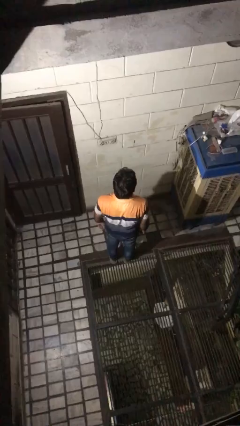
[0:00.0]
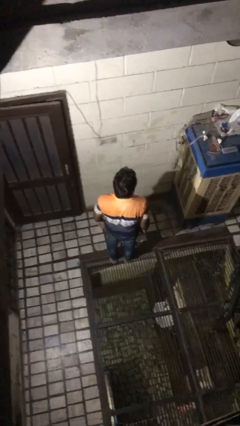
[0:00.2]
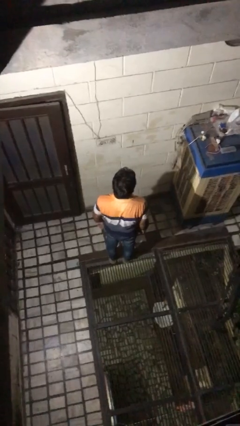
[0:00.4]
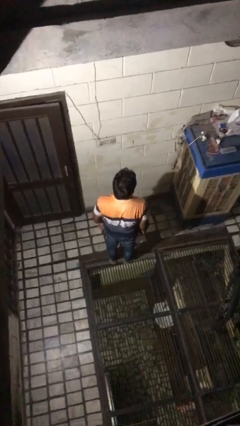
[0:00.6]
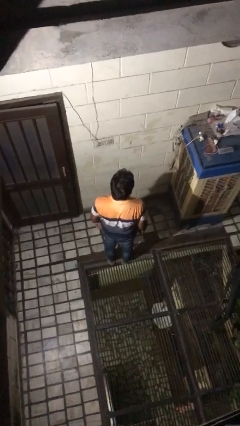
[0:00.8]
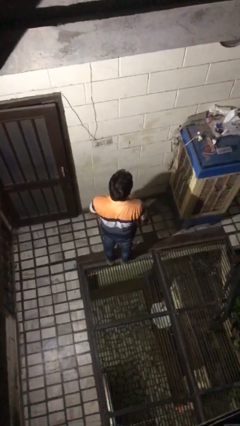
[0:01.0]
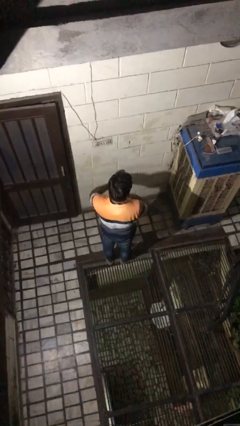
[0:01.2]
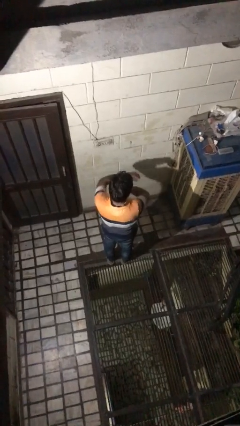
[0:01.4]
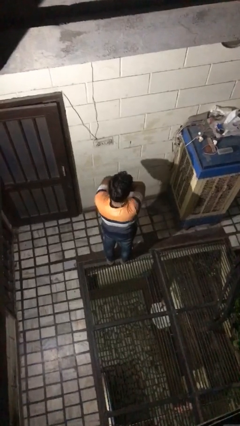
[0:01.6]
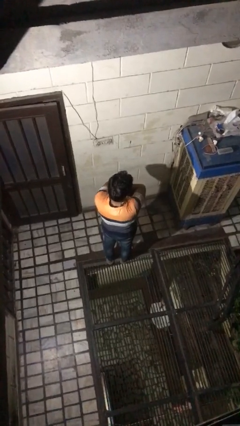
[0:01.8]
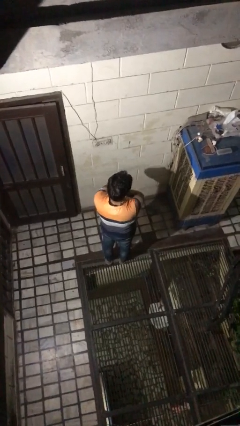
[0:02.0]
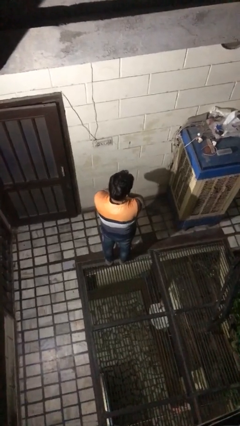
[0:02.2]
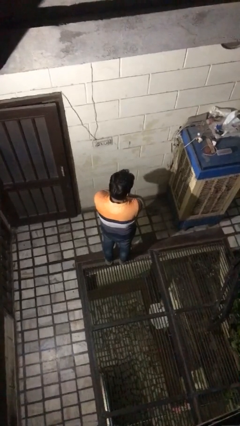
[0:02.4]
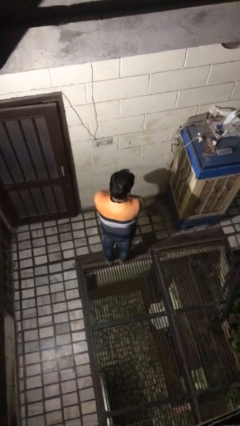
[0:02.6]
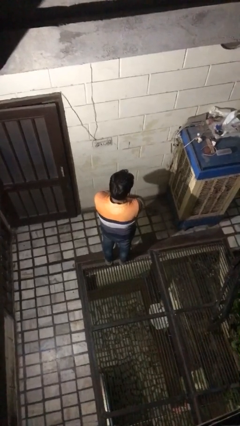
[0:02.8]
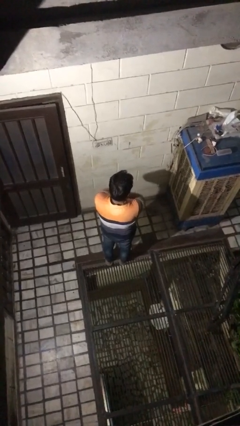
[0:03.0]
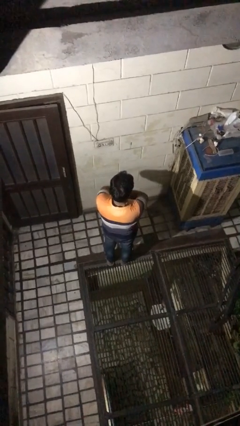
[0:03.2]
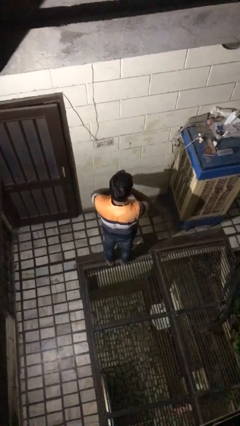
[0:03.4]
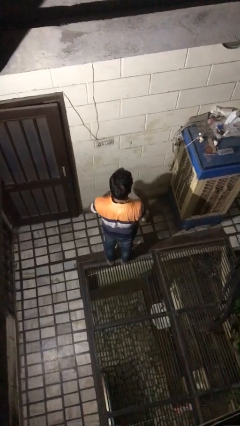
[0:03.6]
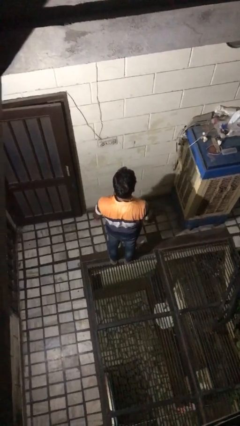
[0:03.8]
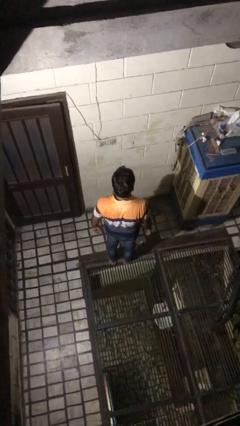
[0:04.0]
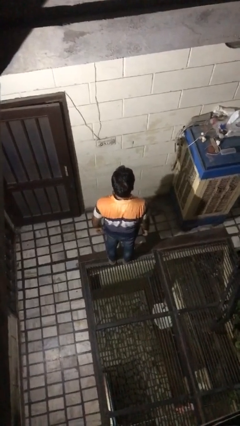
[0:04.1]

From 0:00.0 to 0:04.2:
person crosses arms

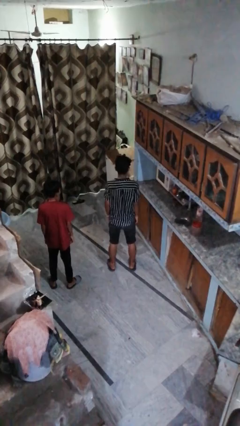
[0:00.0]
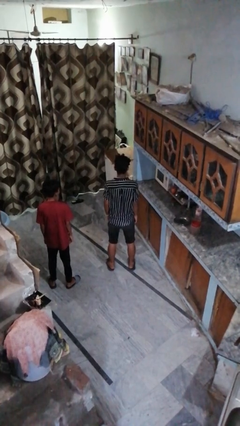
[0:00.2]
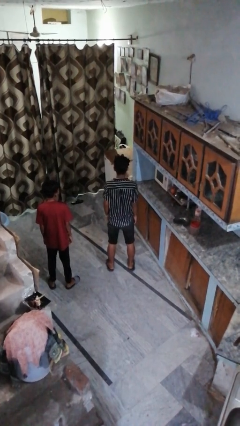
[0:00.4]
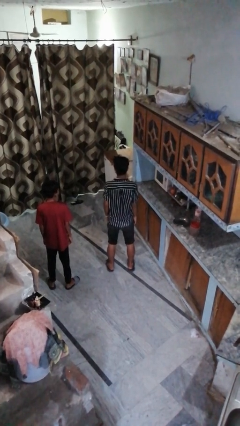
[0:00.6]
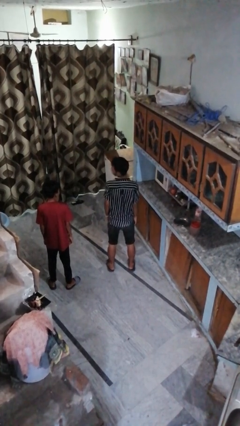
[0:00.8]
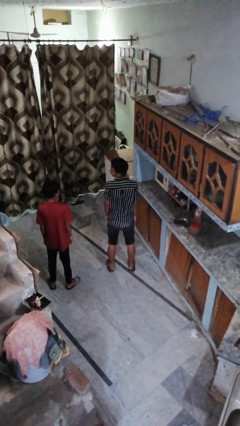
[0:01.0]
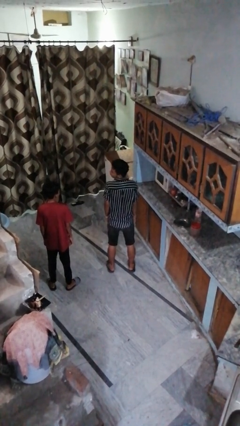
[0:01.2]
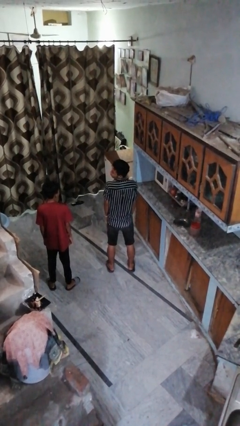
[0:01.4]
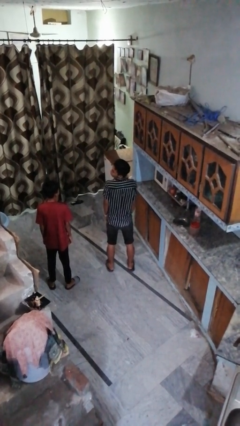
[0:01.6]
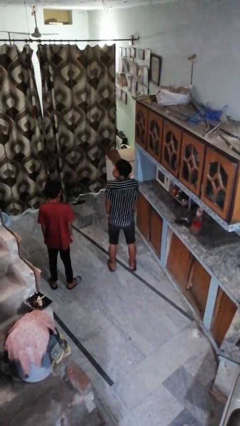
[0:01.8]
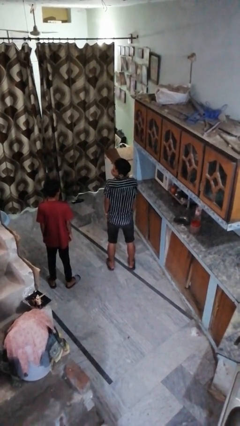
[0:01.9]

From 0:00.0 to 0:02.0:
person looks over shoulder

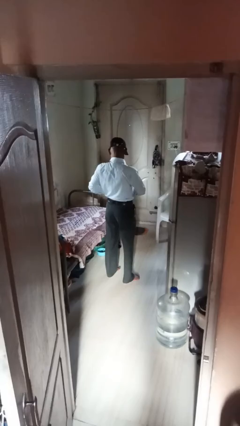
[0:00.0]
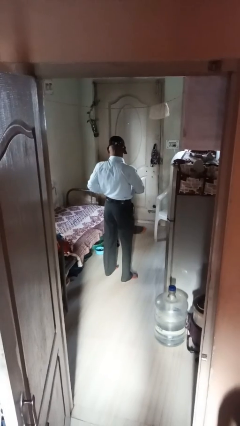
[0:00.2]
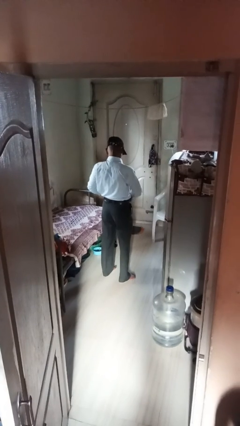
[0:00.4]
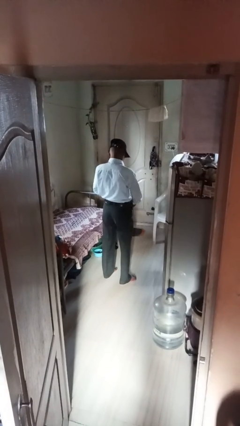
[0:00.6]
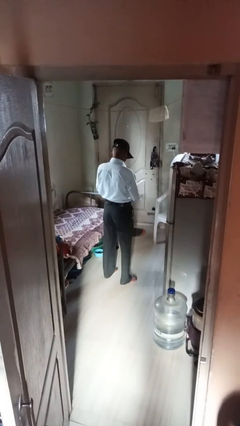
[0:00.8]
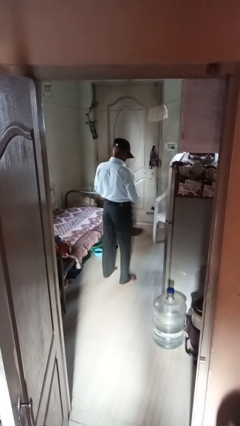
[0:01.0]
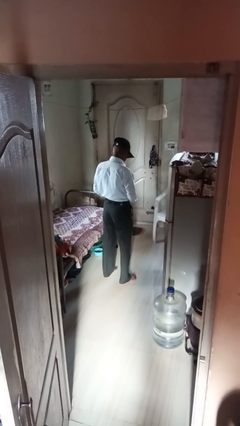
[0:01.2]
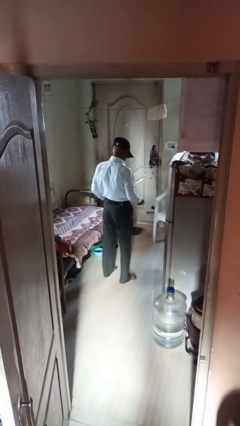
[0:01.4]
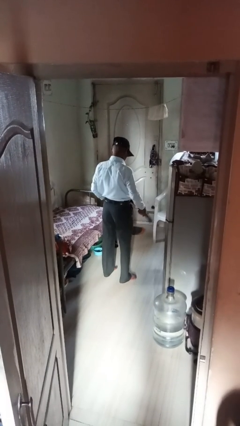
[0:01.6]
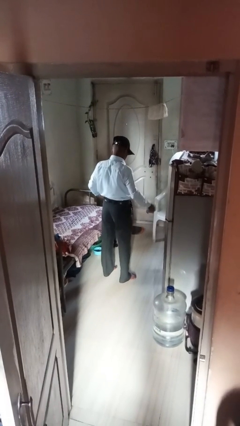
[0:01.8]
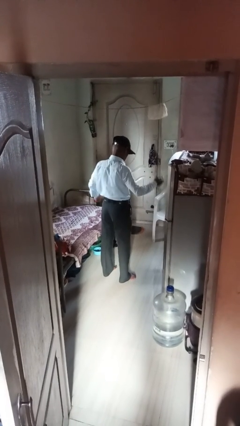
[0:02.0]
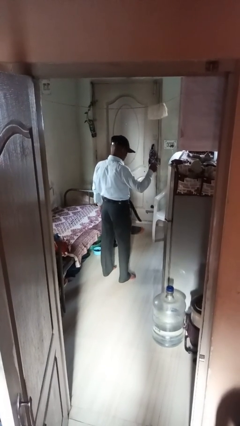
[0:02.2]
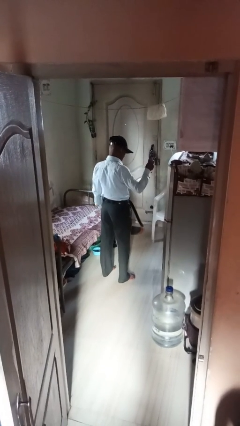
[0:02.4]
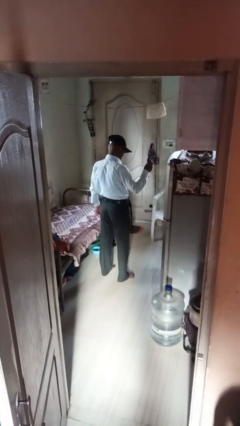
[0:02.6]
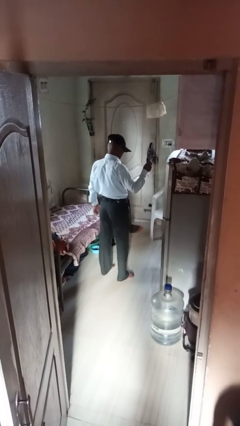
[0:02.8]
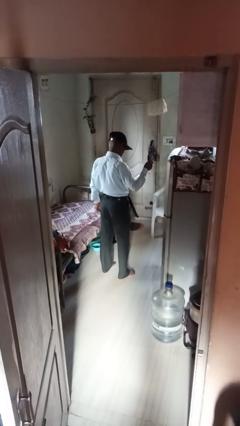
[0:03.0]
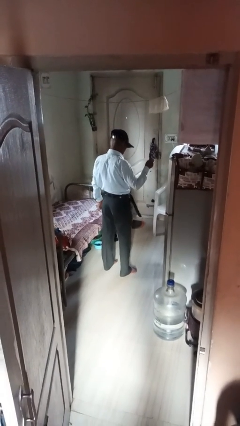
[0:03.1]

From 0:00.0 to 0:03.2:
person takes off belt

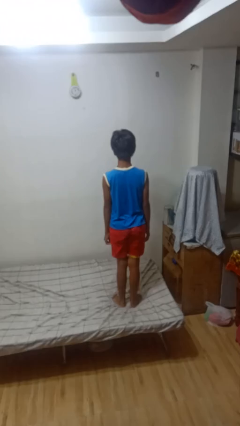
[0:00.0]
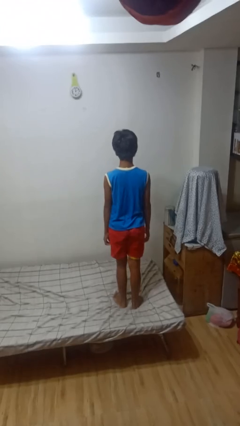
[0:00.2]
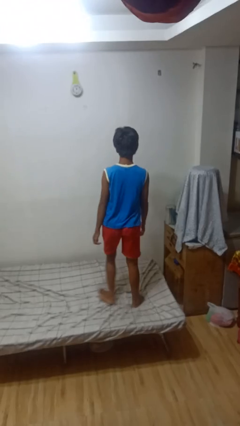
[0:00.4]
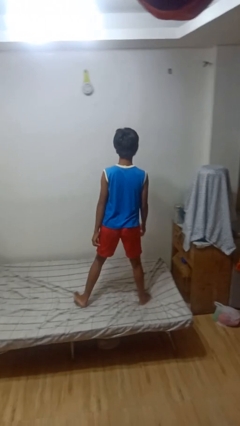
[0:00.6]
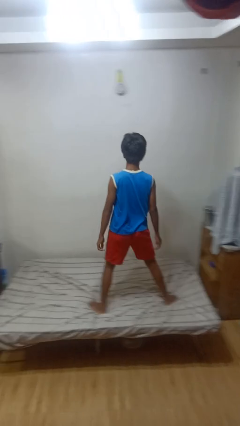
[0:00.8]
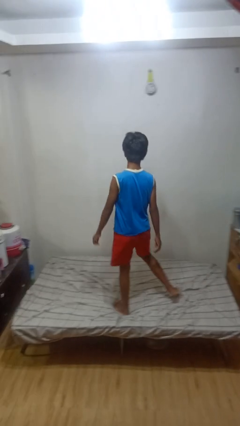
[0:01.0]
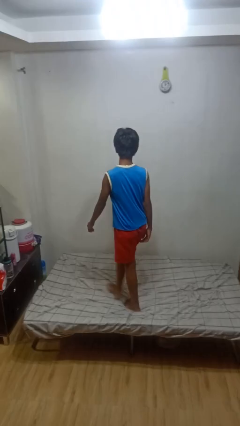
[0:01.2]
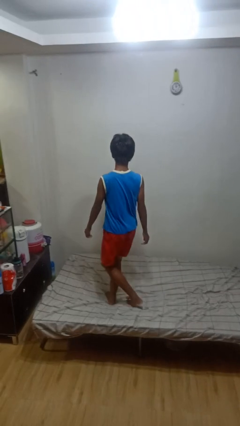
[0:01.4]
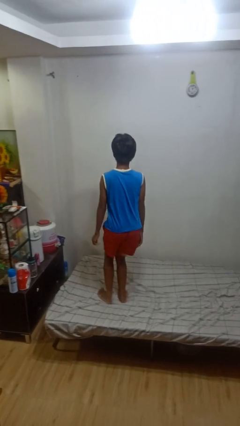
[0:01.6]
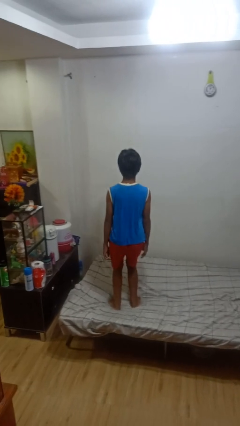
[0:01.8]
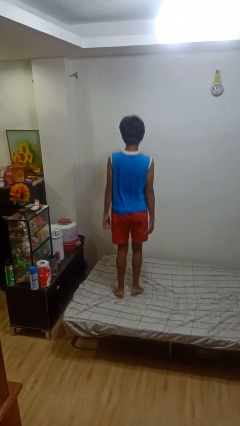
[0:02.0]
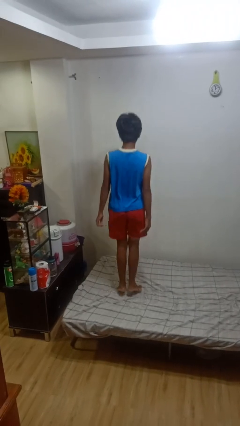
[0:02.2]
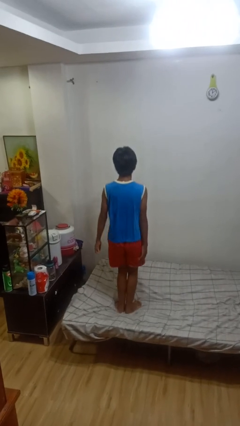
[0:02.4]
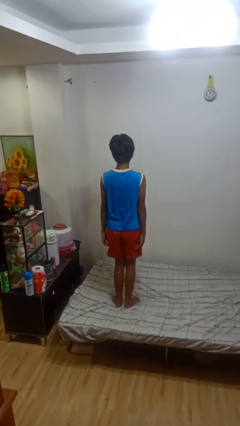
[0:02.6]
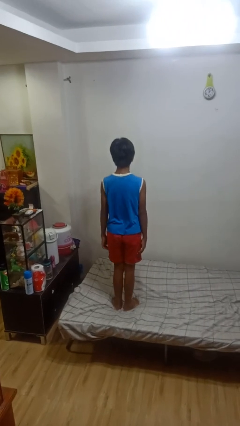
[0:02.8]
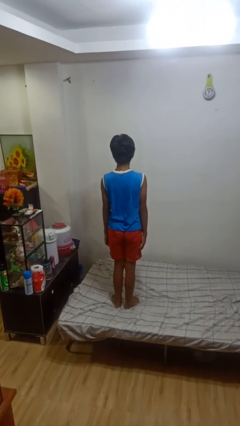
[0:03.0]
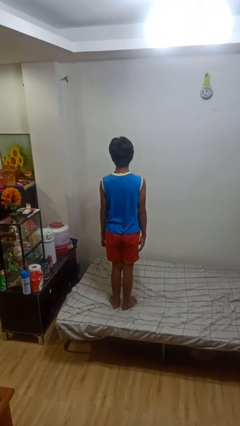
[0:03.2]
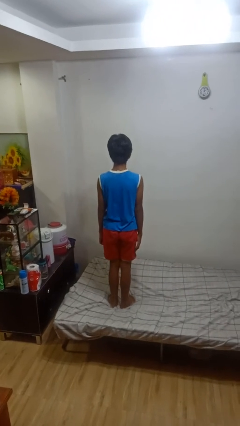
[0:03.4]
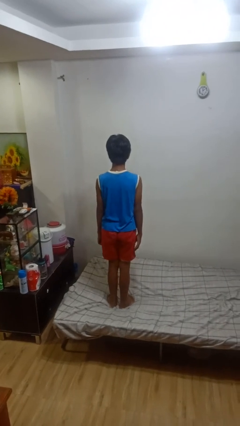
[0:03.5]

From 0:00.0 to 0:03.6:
person jumps on bed

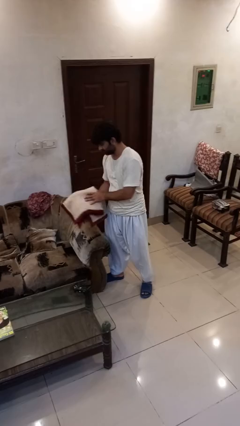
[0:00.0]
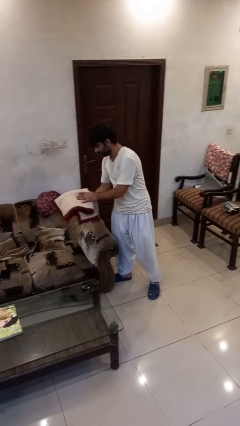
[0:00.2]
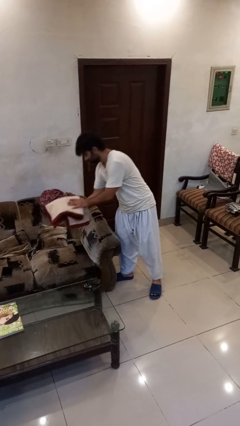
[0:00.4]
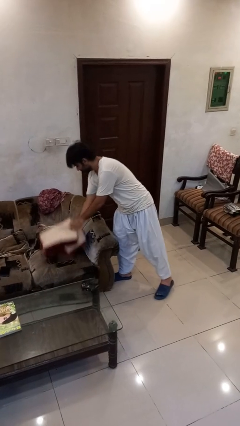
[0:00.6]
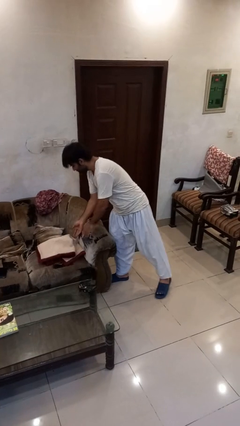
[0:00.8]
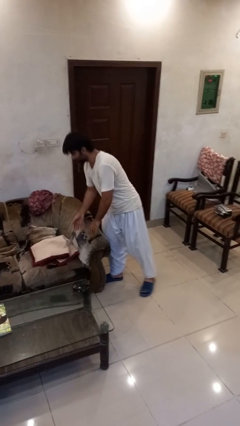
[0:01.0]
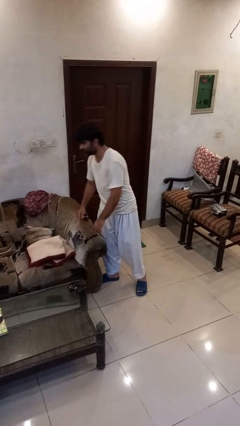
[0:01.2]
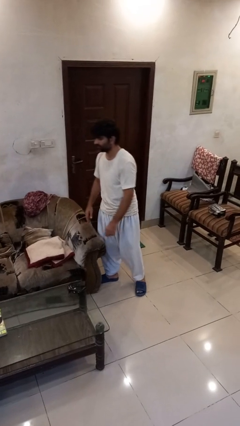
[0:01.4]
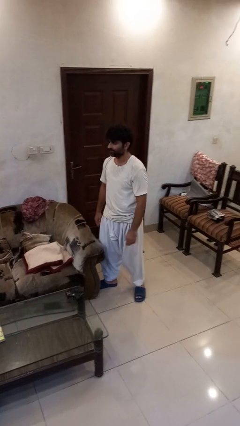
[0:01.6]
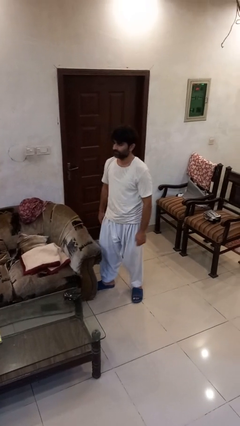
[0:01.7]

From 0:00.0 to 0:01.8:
person puts down object on couch

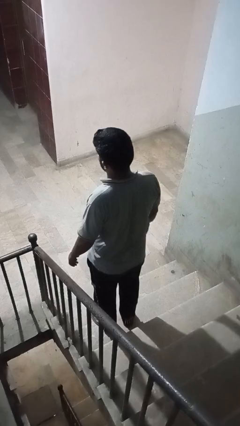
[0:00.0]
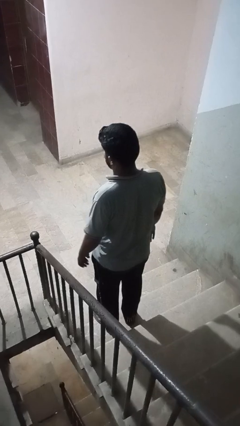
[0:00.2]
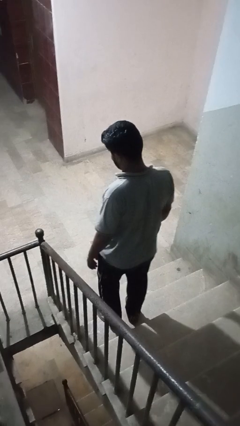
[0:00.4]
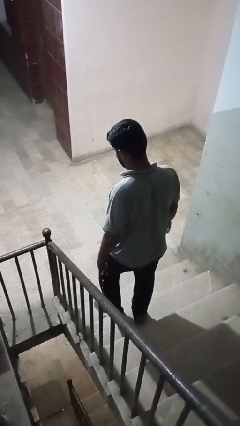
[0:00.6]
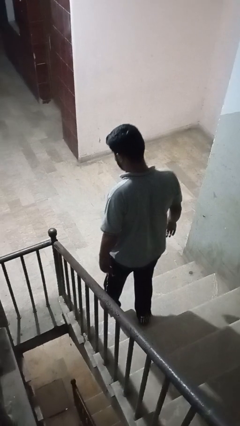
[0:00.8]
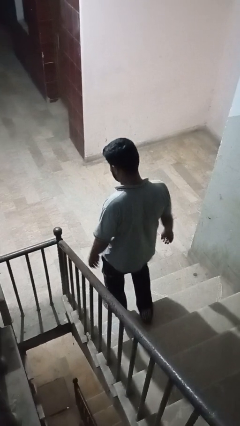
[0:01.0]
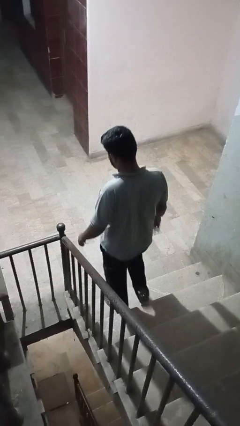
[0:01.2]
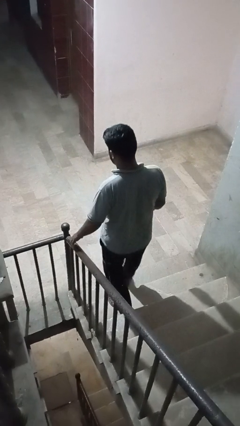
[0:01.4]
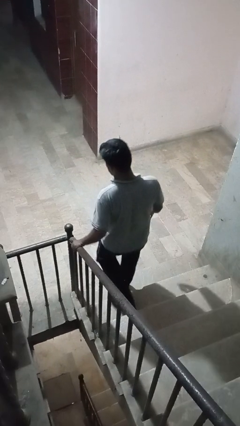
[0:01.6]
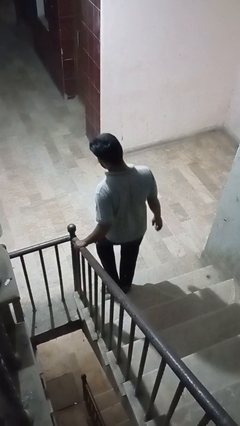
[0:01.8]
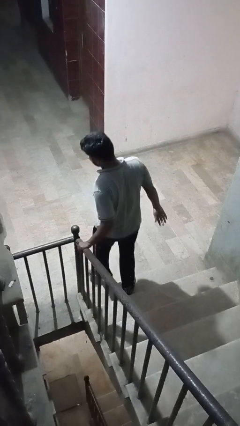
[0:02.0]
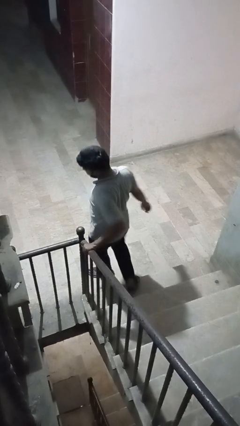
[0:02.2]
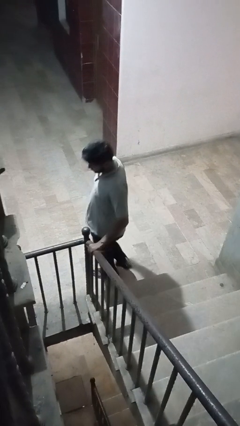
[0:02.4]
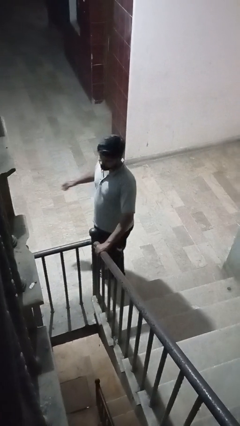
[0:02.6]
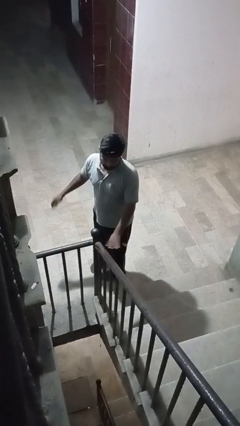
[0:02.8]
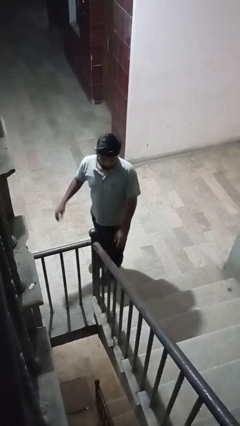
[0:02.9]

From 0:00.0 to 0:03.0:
person climbs down stairs
